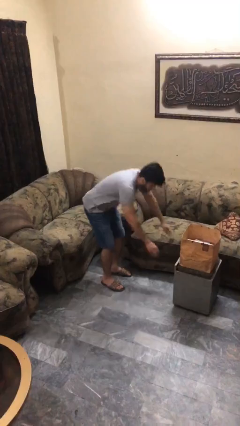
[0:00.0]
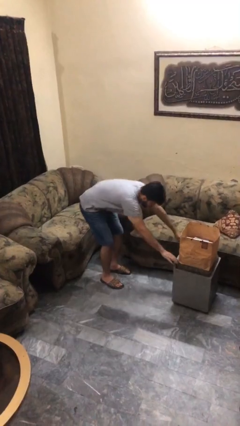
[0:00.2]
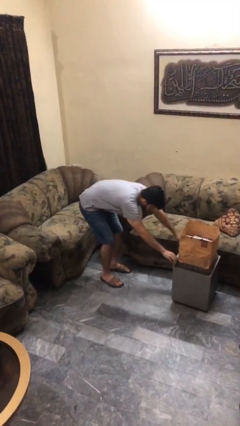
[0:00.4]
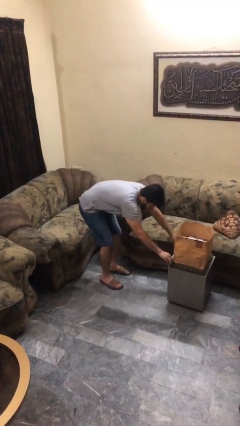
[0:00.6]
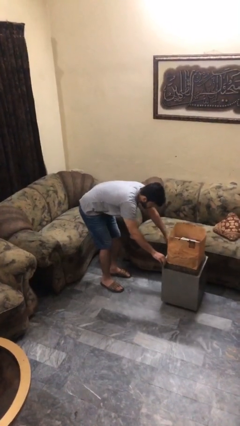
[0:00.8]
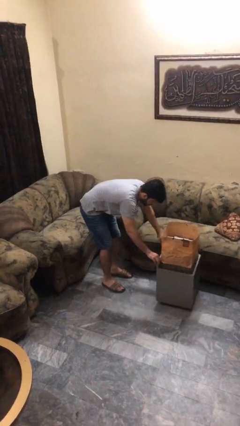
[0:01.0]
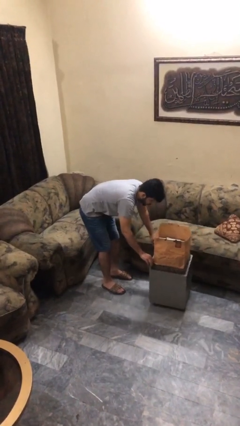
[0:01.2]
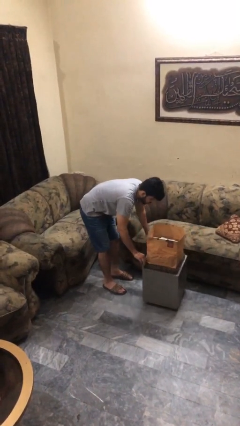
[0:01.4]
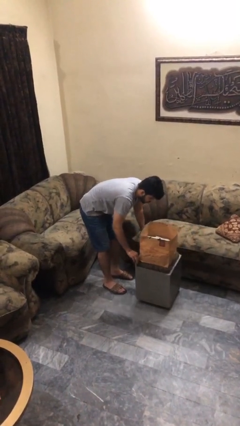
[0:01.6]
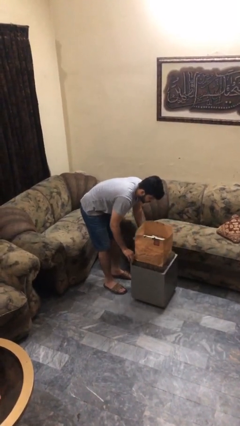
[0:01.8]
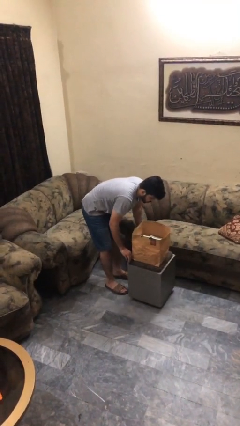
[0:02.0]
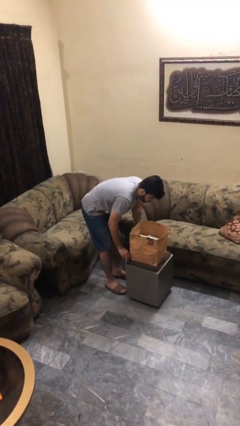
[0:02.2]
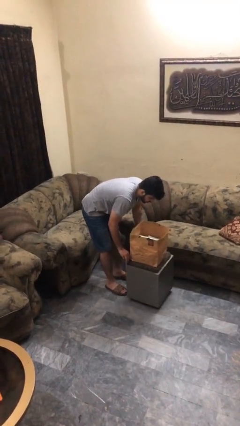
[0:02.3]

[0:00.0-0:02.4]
person pulls wheeled cart

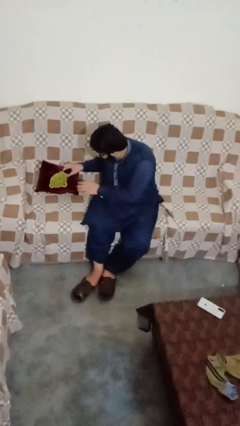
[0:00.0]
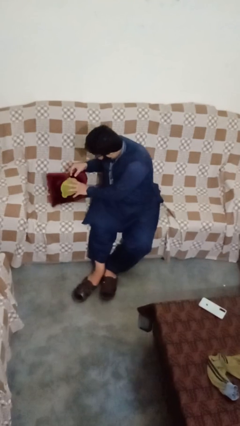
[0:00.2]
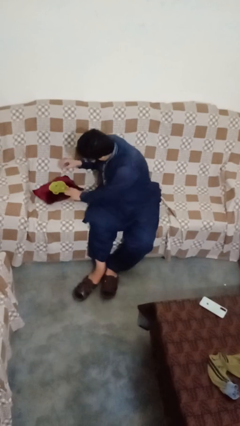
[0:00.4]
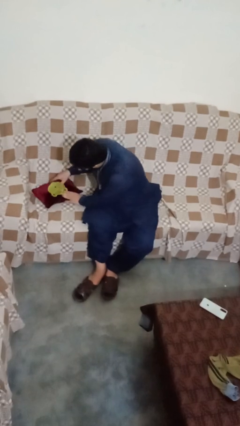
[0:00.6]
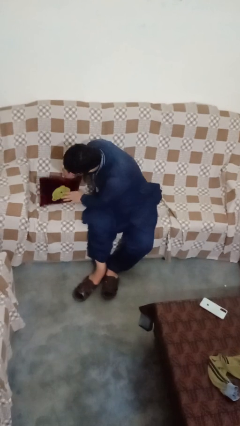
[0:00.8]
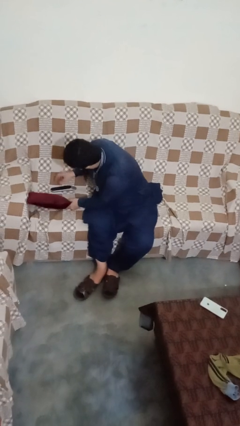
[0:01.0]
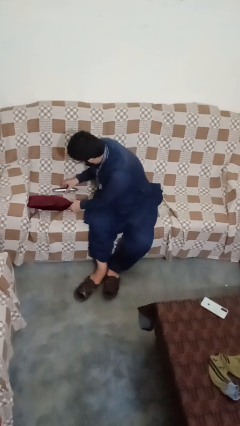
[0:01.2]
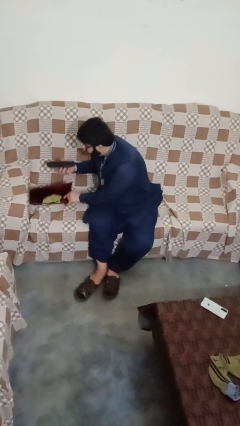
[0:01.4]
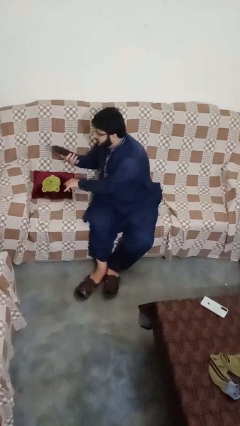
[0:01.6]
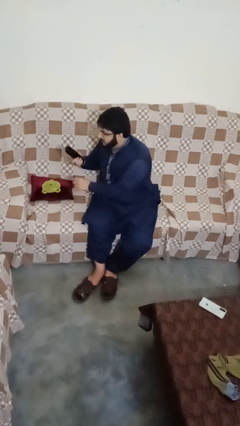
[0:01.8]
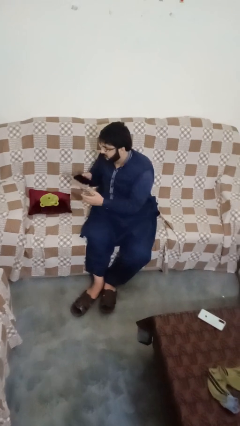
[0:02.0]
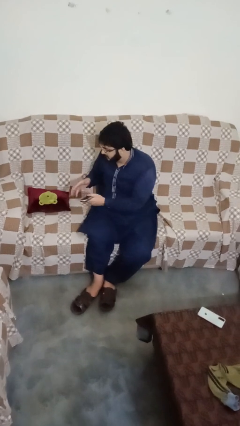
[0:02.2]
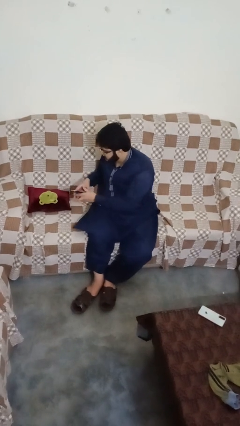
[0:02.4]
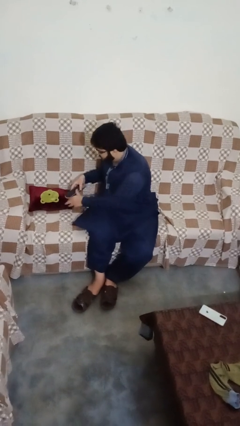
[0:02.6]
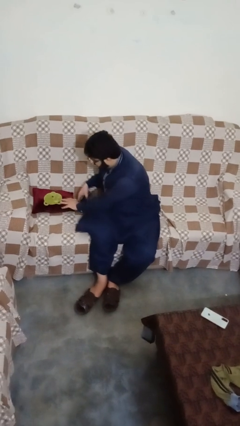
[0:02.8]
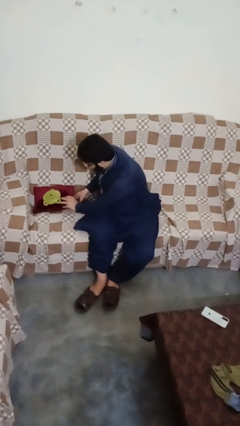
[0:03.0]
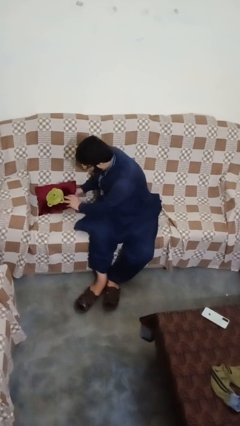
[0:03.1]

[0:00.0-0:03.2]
person searches in couch

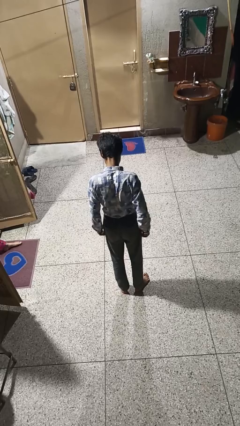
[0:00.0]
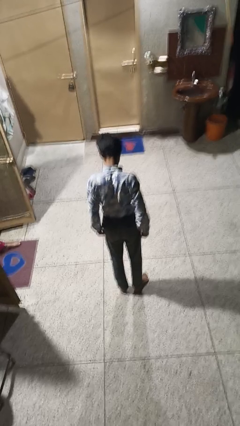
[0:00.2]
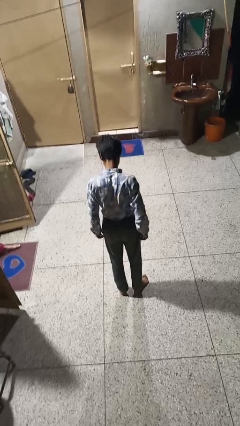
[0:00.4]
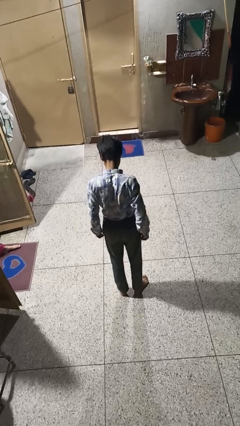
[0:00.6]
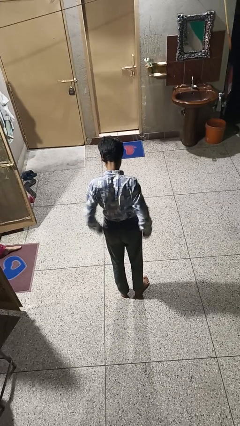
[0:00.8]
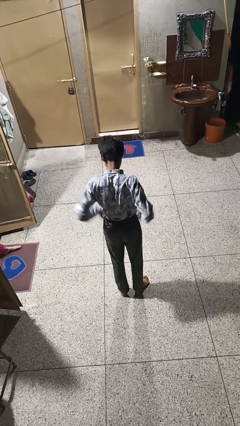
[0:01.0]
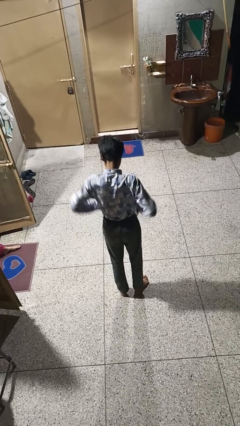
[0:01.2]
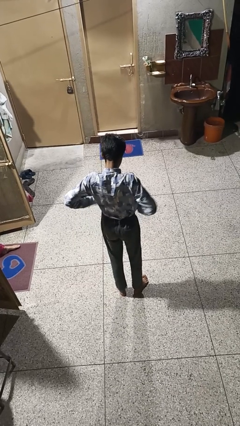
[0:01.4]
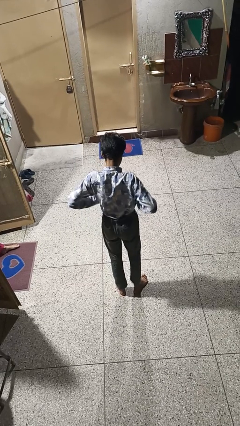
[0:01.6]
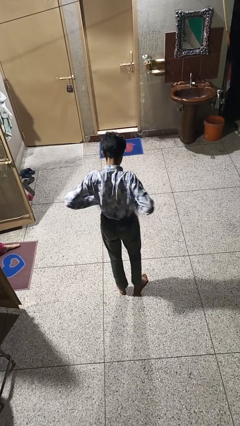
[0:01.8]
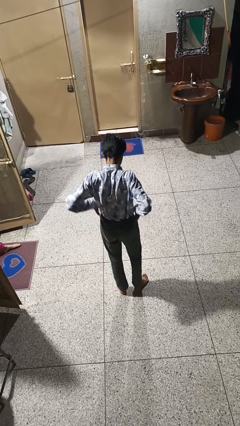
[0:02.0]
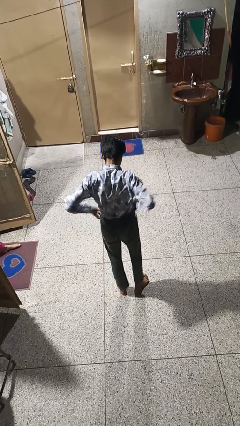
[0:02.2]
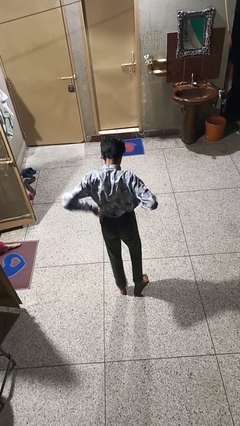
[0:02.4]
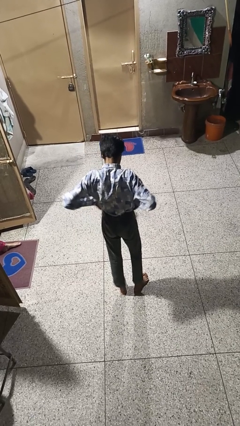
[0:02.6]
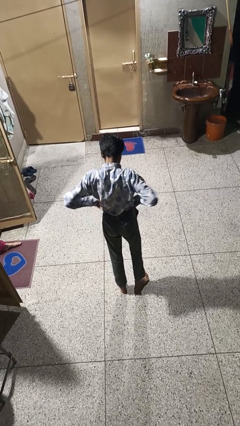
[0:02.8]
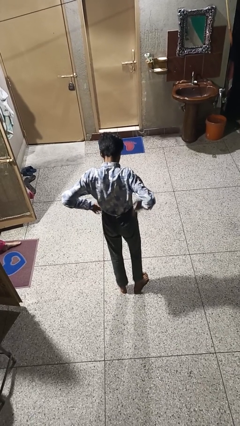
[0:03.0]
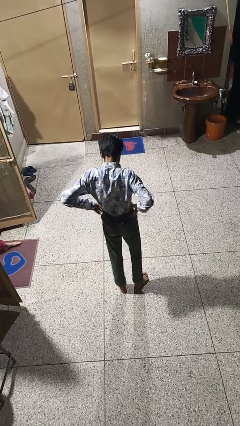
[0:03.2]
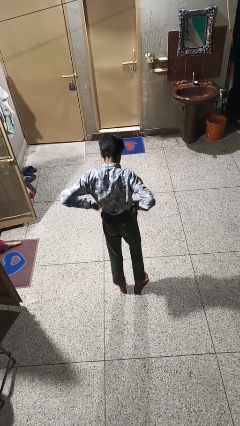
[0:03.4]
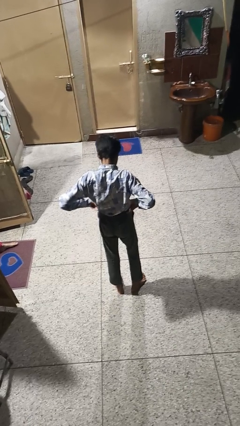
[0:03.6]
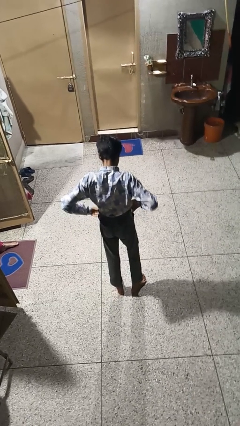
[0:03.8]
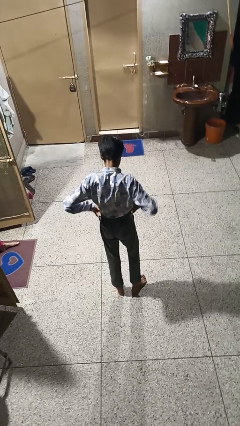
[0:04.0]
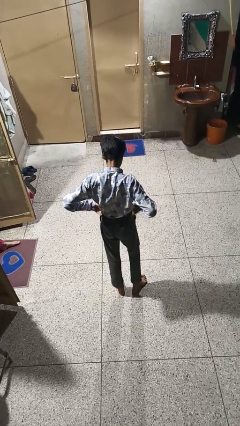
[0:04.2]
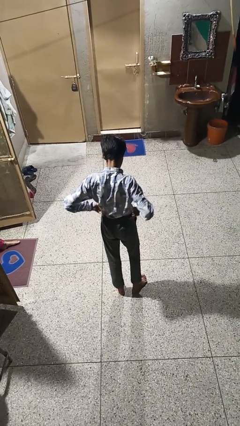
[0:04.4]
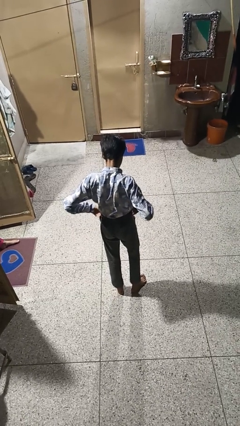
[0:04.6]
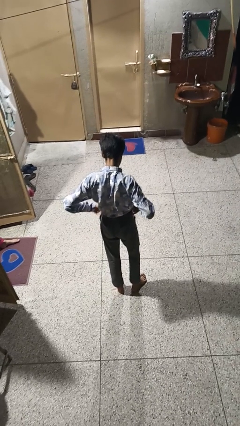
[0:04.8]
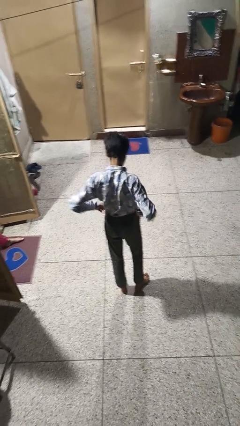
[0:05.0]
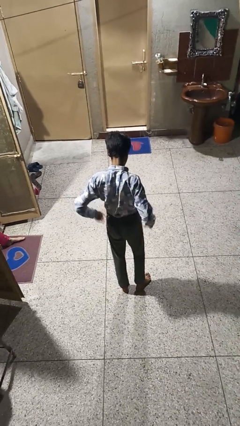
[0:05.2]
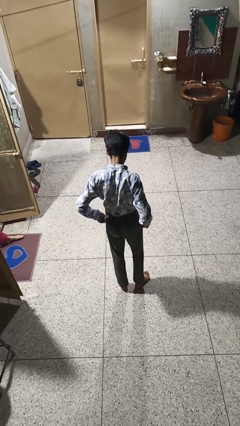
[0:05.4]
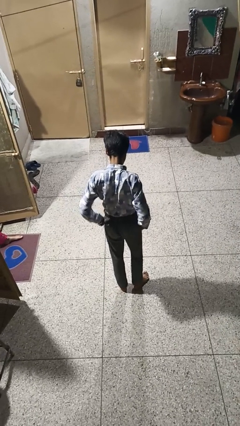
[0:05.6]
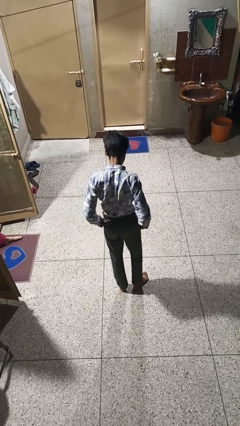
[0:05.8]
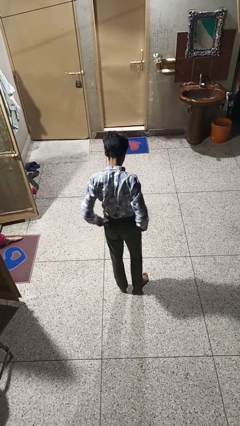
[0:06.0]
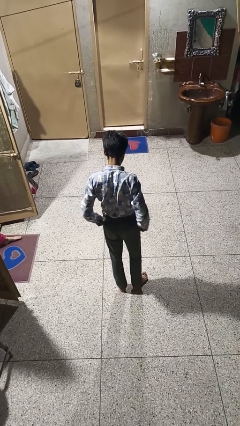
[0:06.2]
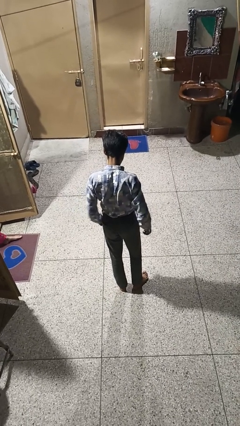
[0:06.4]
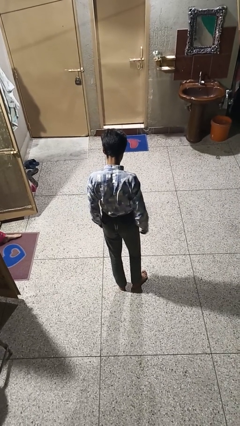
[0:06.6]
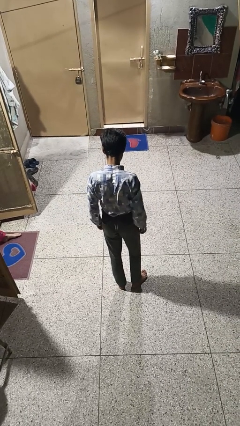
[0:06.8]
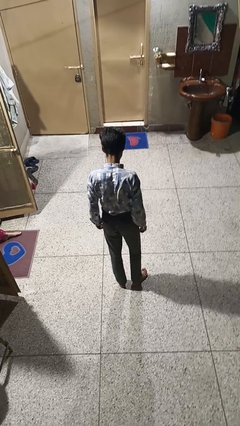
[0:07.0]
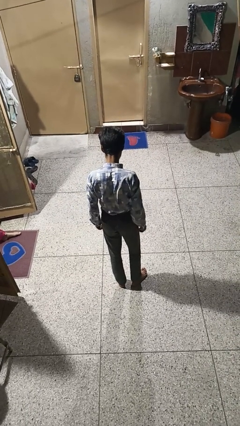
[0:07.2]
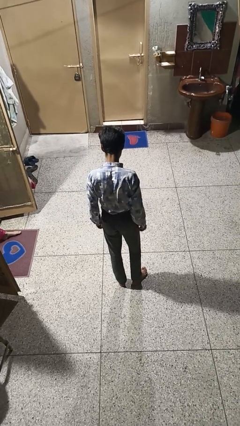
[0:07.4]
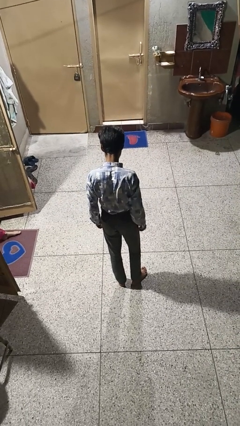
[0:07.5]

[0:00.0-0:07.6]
person hikes up pants

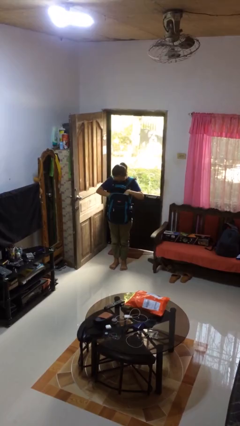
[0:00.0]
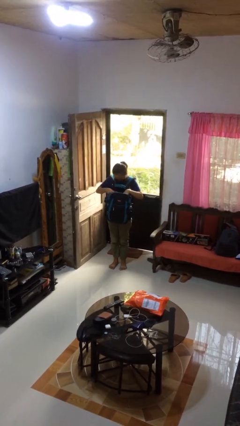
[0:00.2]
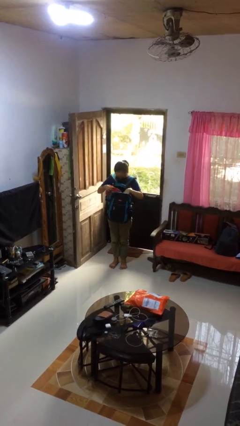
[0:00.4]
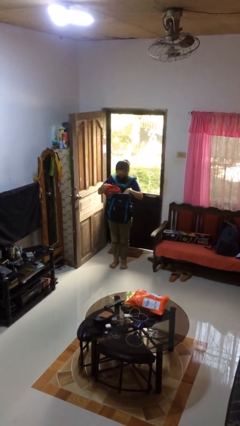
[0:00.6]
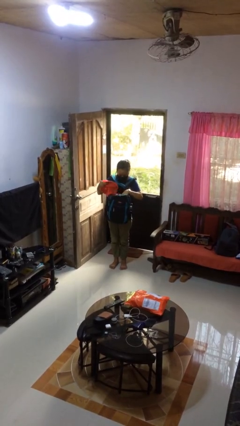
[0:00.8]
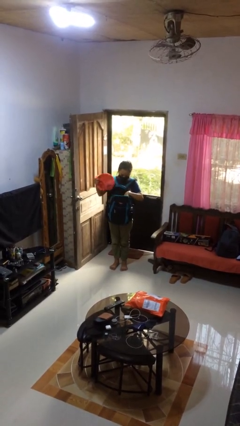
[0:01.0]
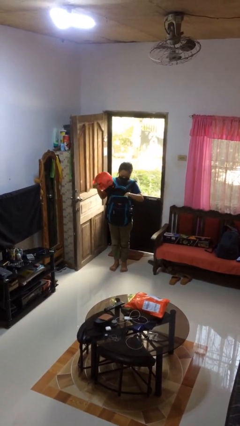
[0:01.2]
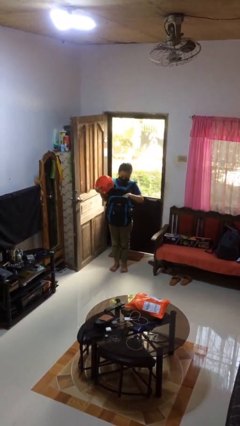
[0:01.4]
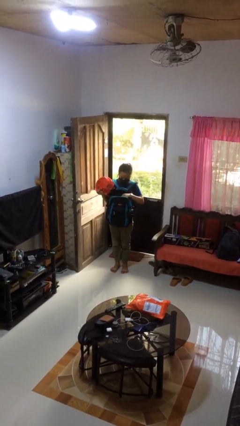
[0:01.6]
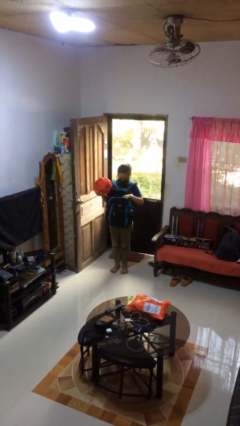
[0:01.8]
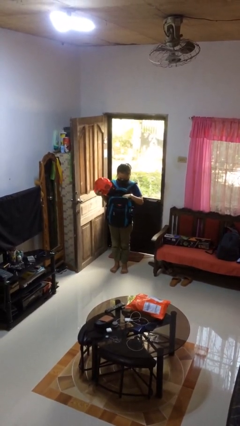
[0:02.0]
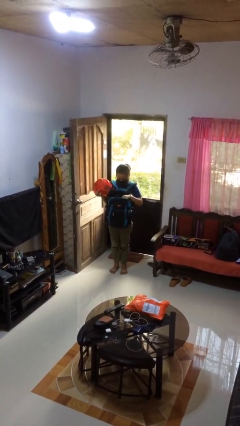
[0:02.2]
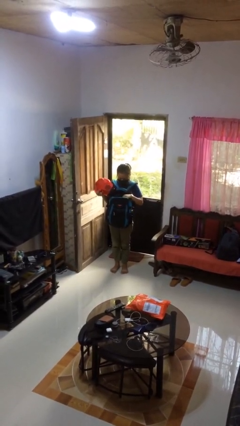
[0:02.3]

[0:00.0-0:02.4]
person takes object from backpack

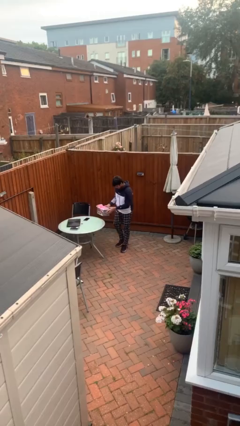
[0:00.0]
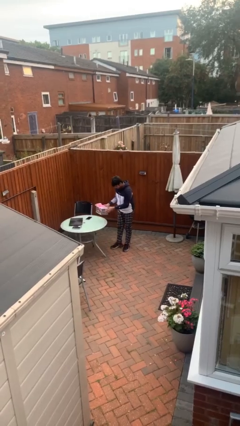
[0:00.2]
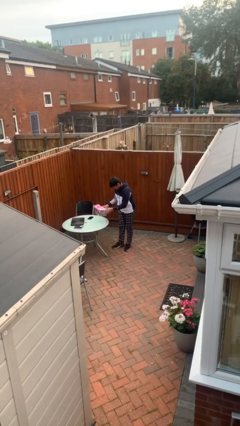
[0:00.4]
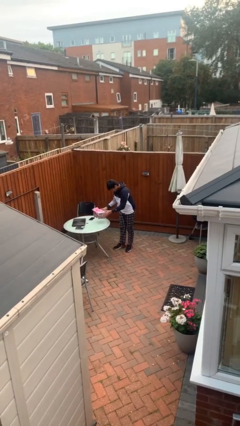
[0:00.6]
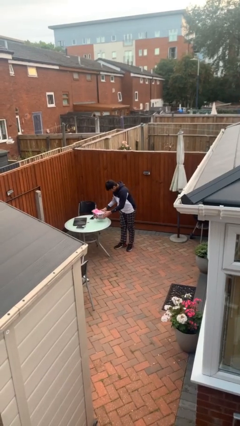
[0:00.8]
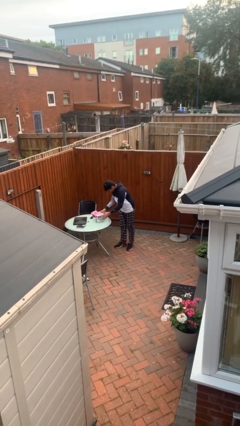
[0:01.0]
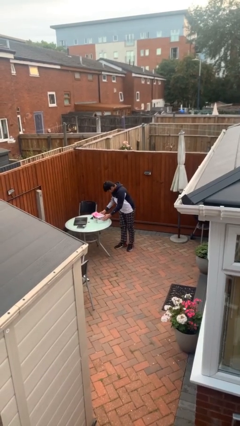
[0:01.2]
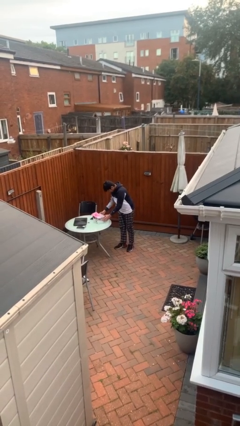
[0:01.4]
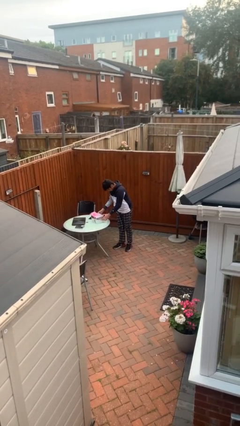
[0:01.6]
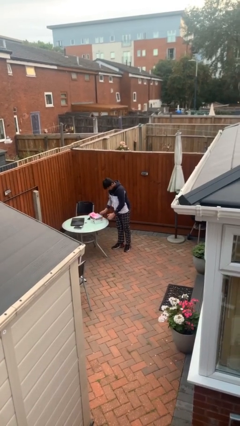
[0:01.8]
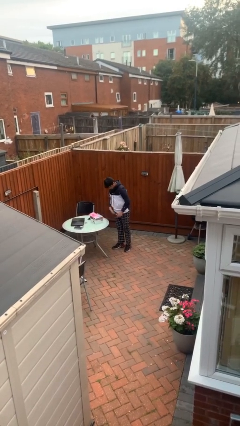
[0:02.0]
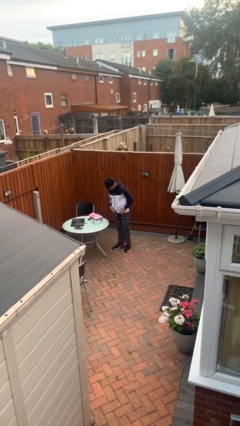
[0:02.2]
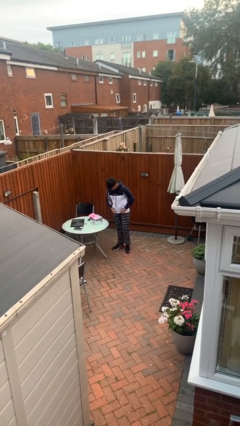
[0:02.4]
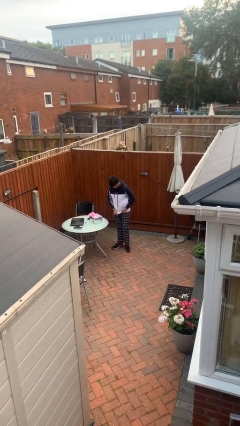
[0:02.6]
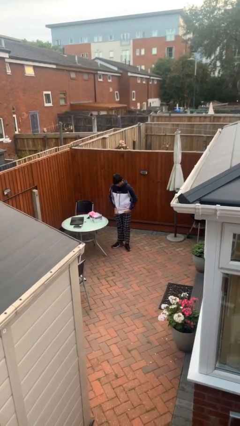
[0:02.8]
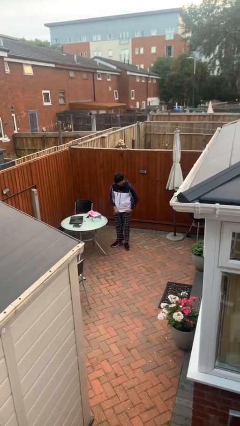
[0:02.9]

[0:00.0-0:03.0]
person puts down object on table
